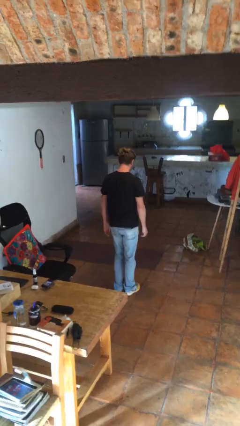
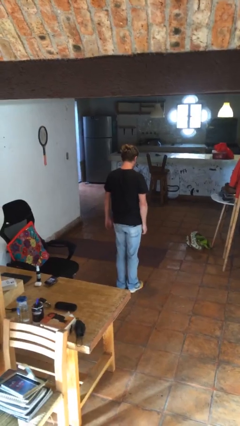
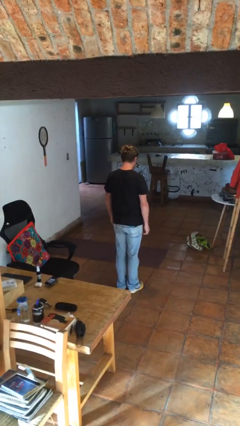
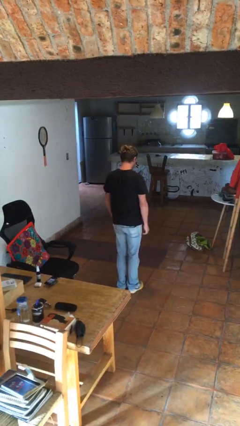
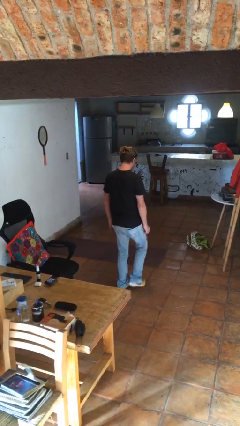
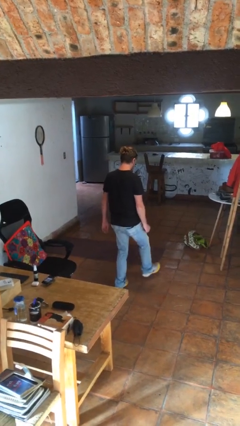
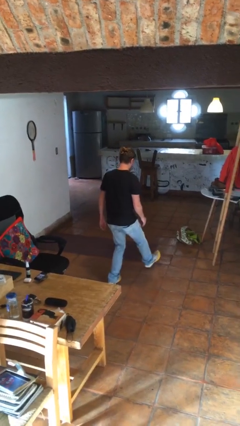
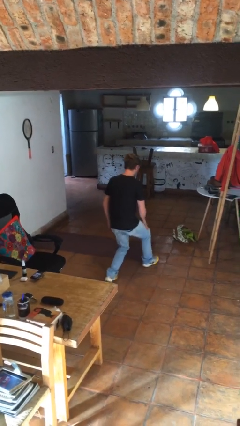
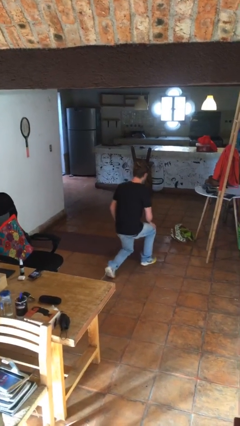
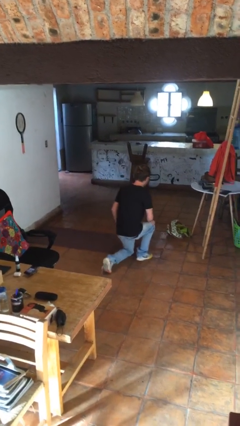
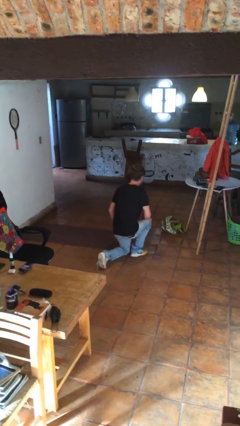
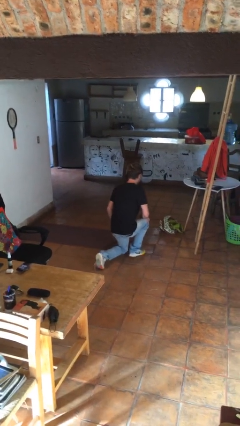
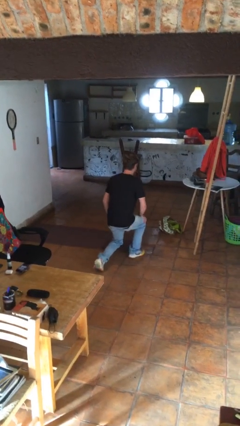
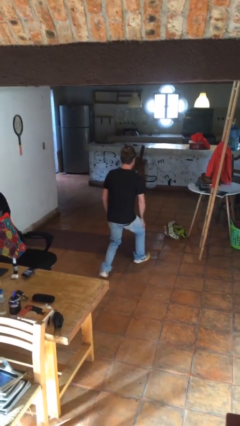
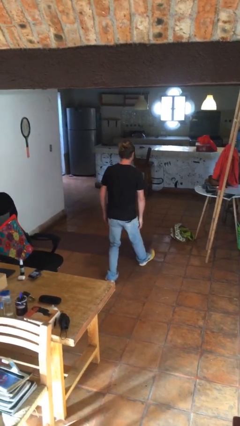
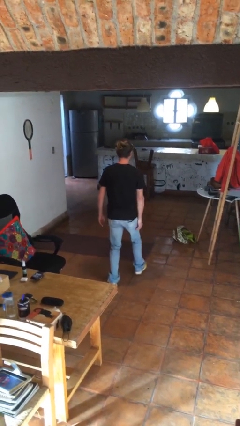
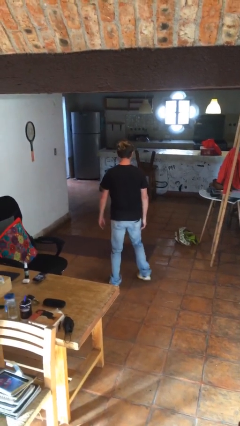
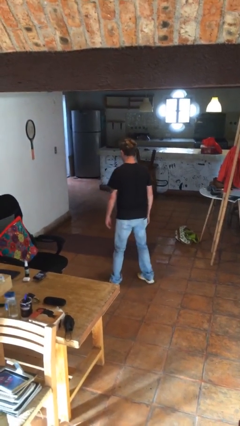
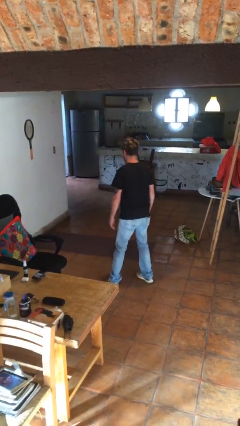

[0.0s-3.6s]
person exercises with lunges

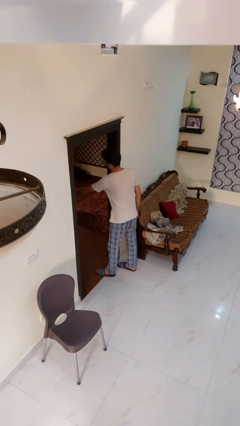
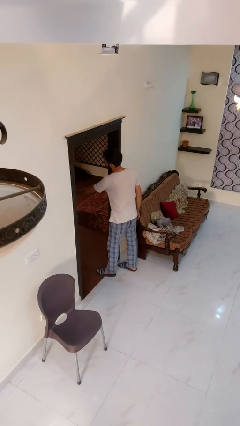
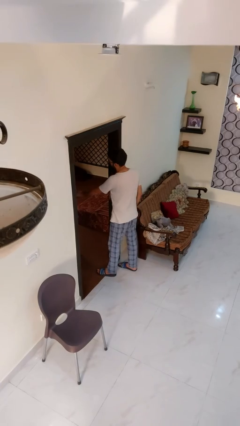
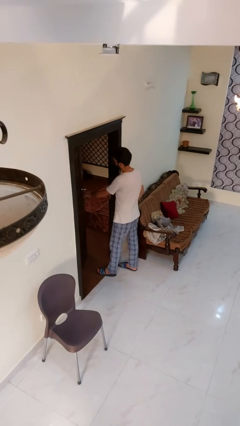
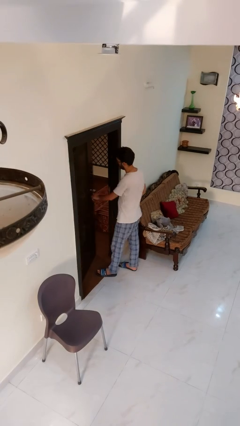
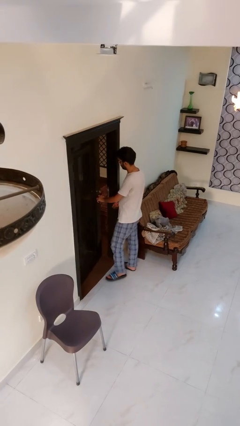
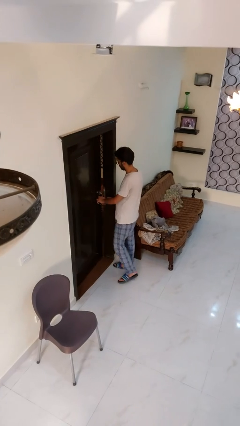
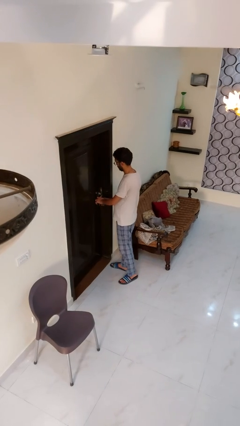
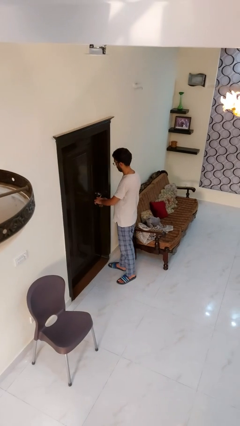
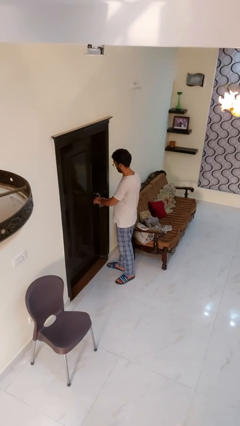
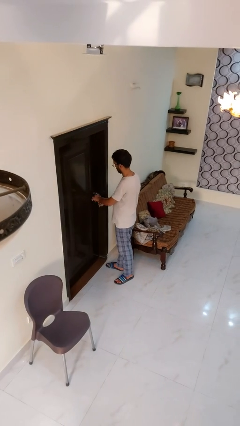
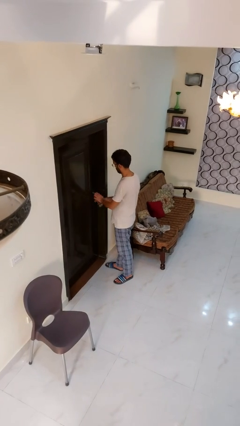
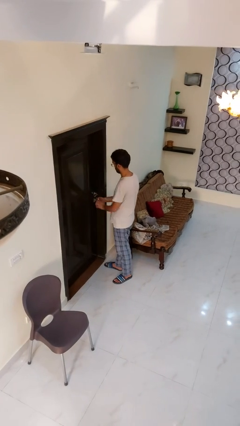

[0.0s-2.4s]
person closes facility door

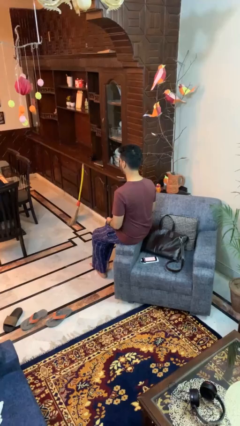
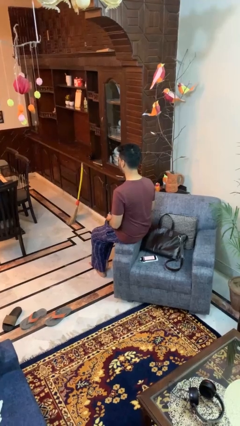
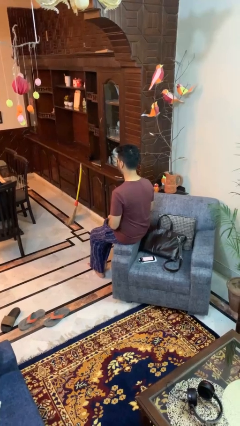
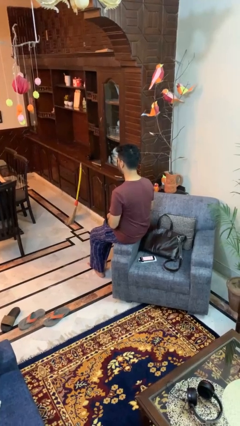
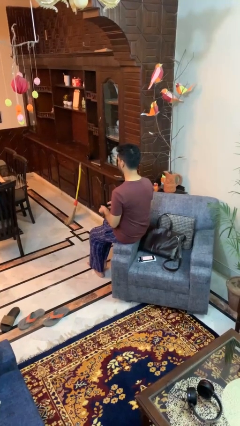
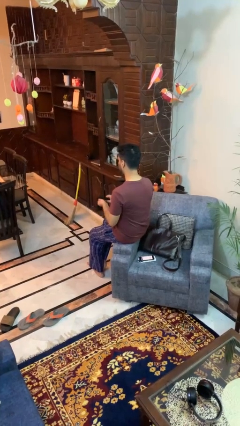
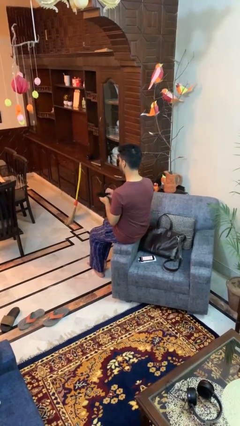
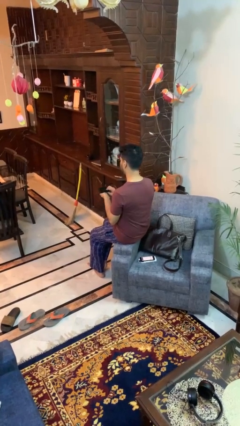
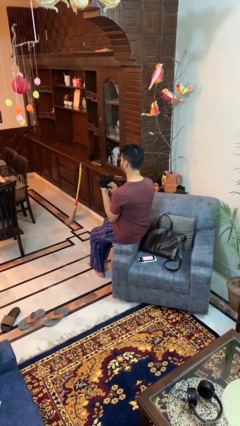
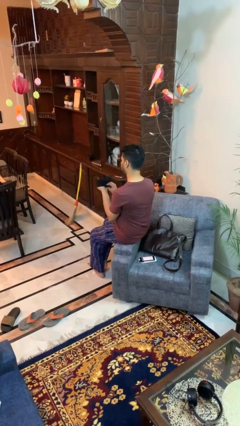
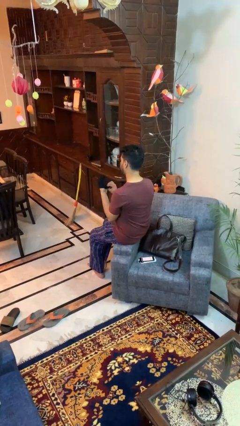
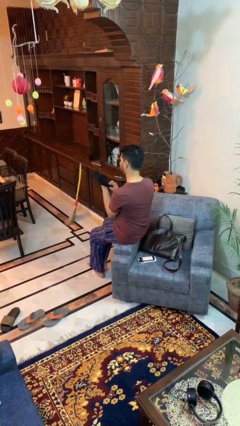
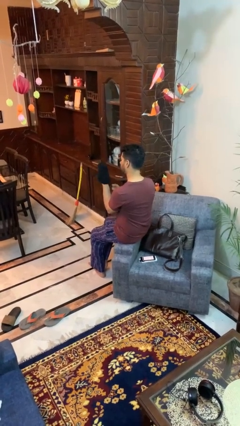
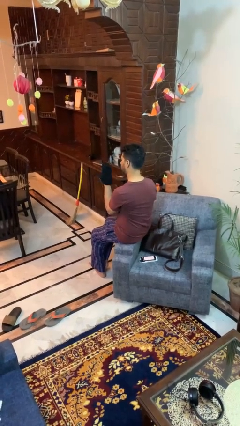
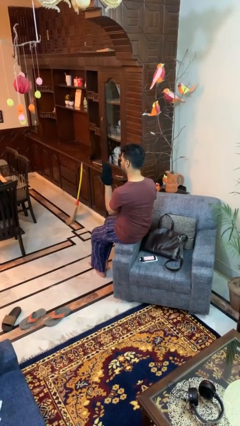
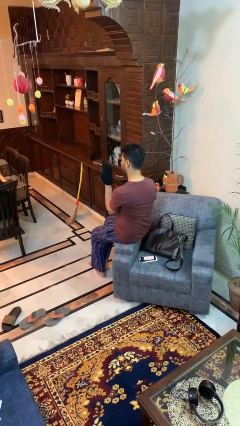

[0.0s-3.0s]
person puts on gloves

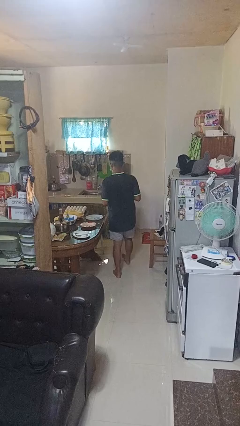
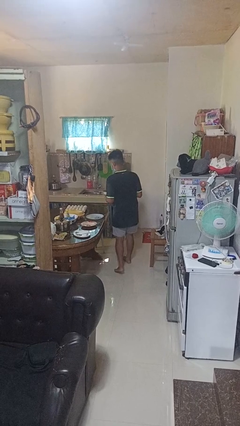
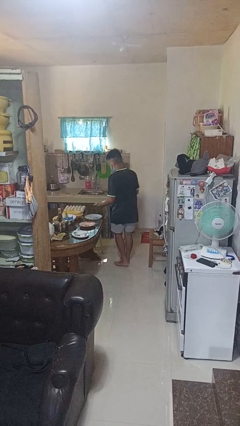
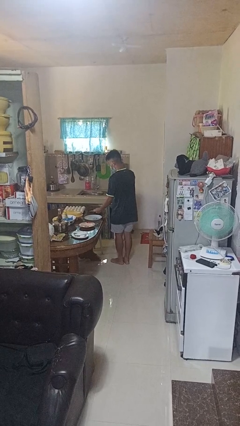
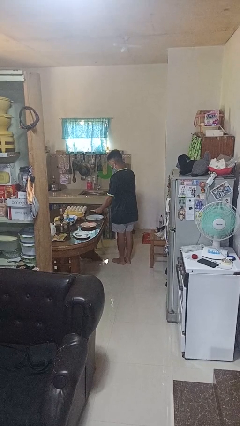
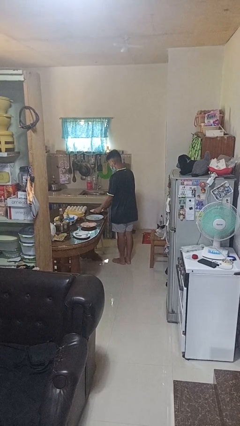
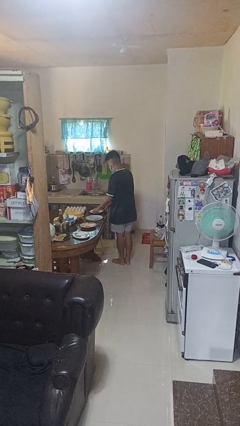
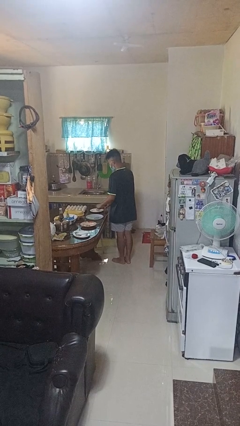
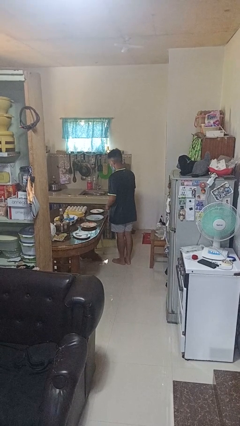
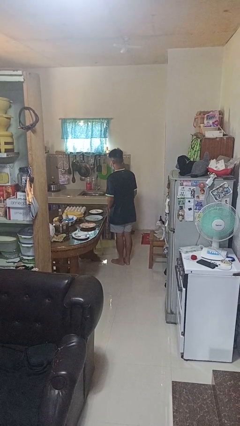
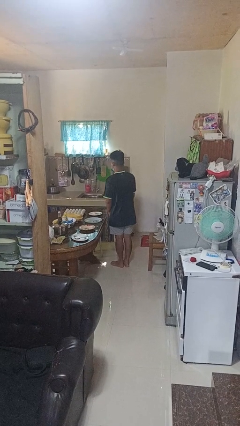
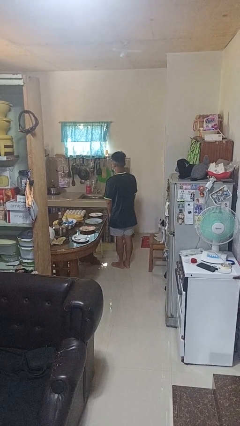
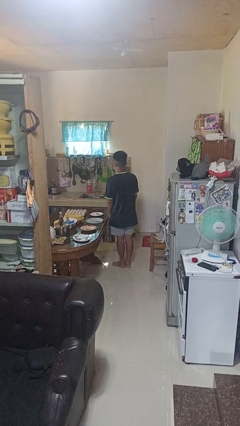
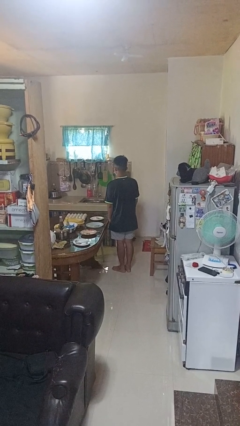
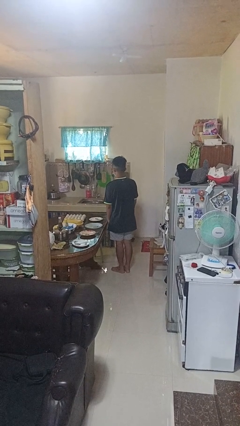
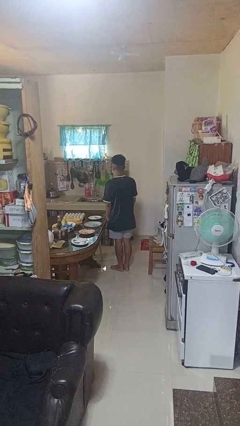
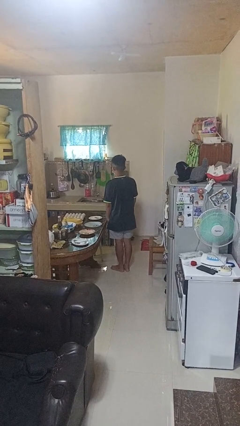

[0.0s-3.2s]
person sets table

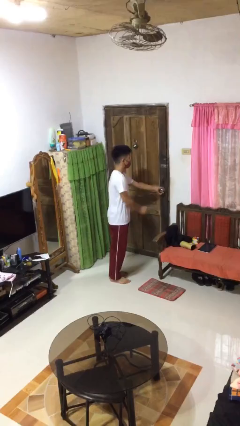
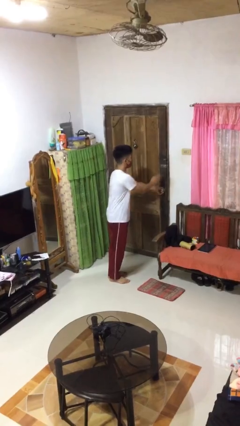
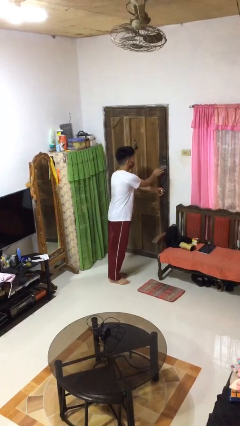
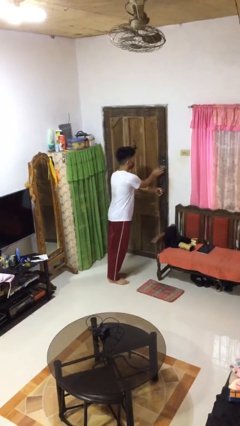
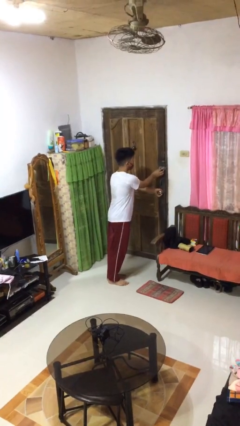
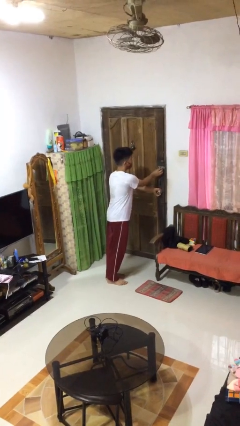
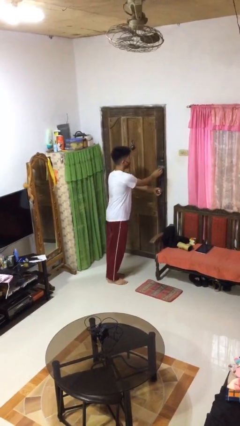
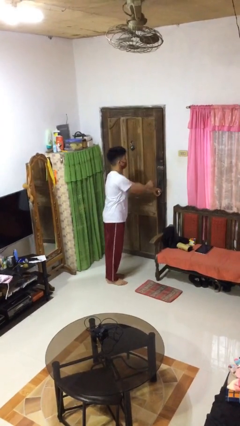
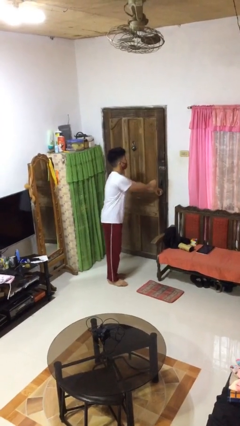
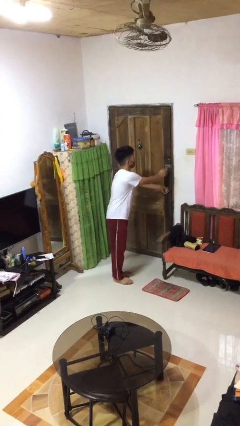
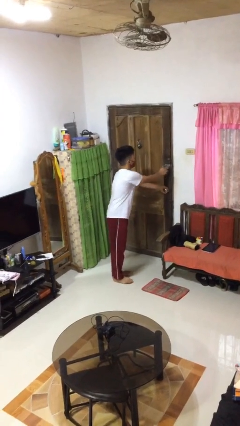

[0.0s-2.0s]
person locks door with keys

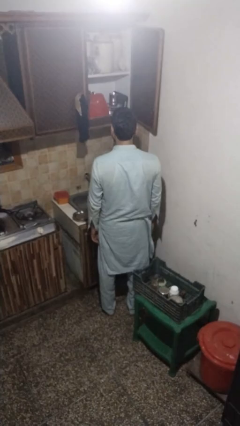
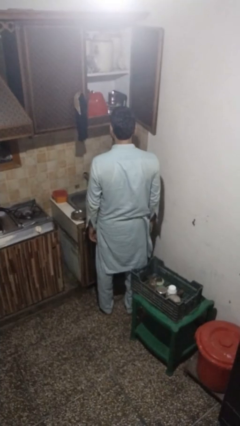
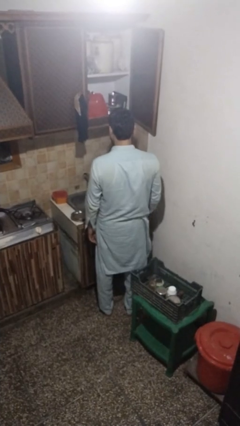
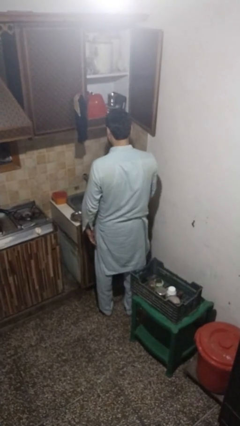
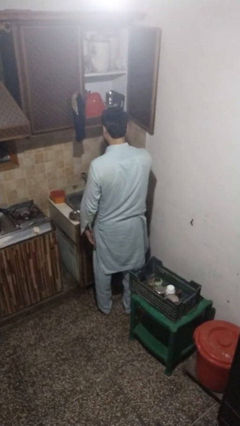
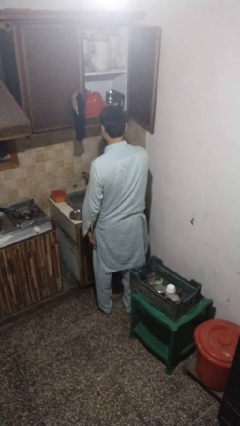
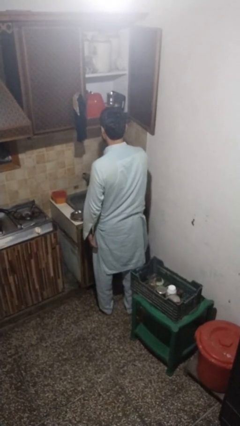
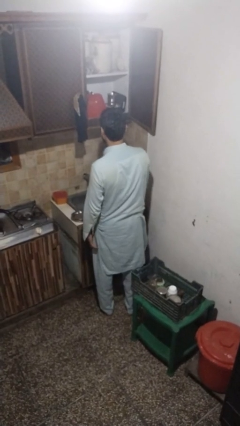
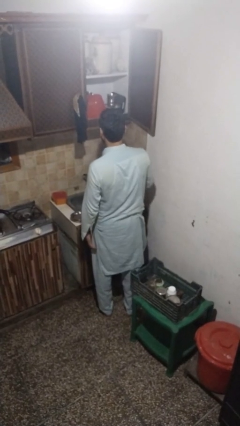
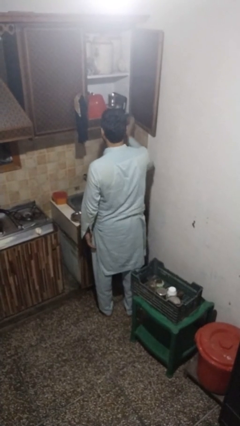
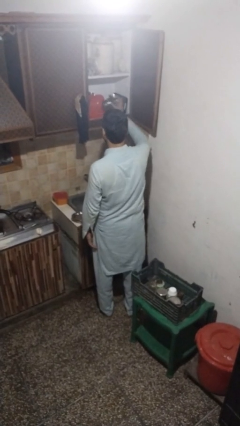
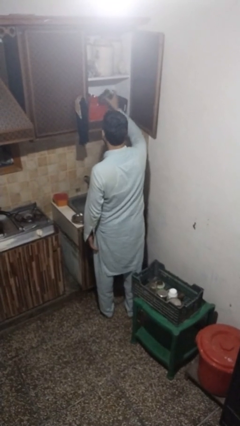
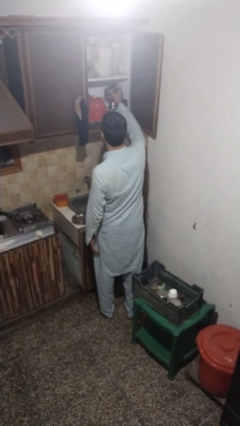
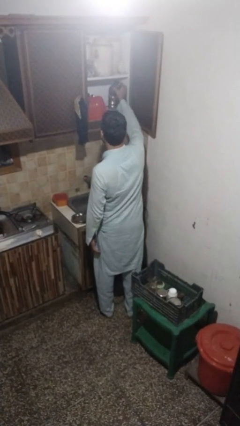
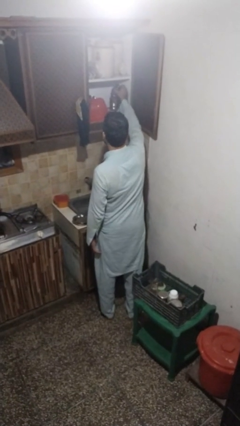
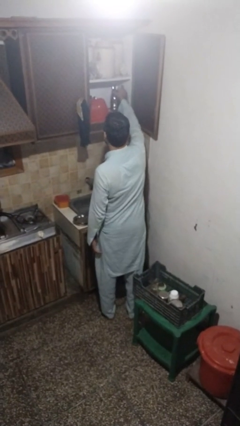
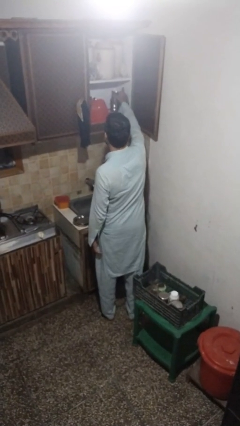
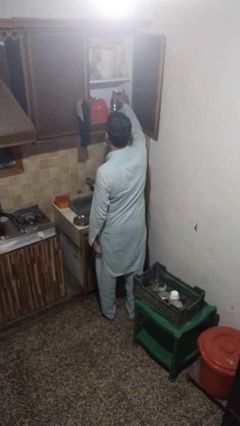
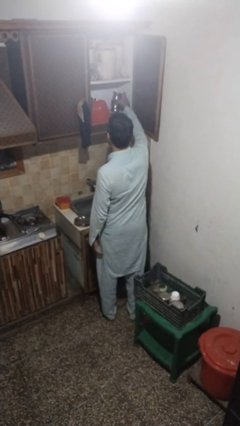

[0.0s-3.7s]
person puts object in cabinet
